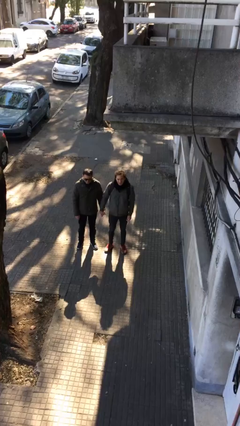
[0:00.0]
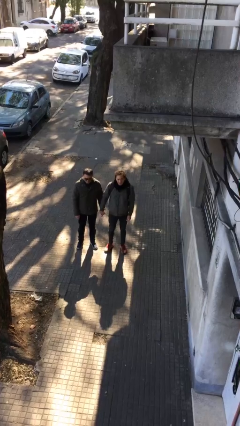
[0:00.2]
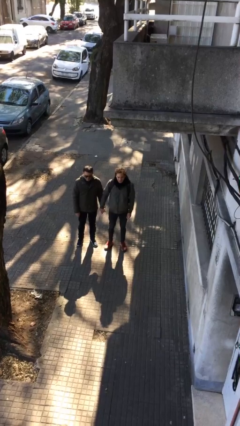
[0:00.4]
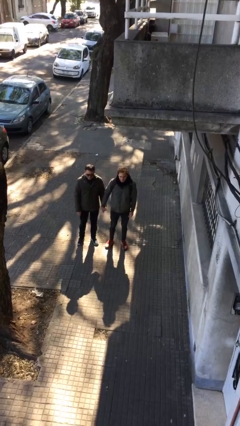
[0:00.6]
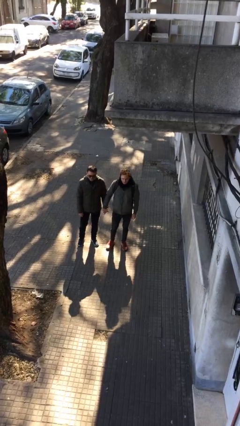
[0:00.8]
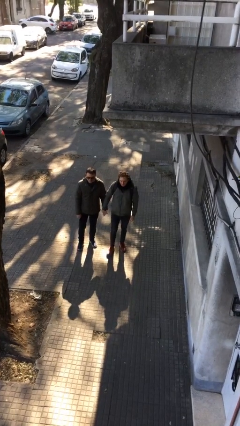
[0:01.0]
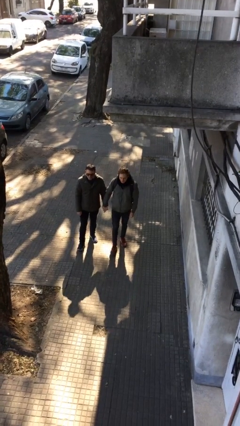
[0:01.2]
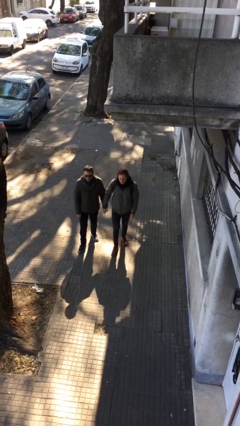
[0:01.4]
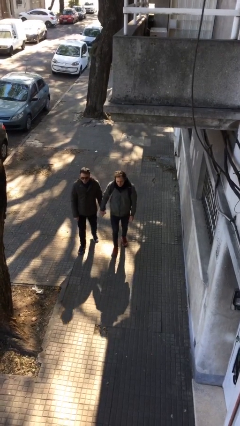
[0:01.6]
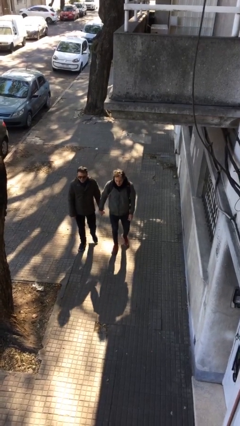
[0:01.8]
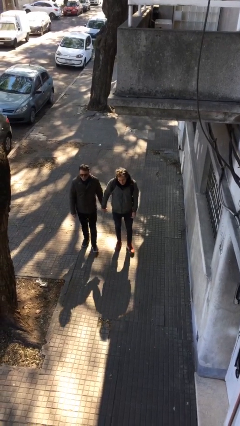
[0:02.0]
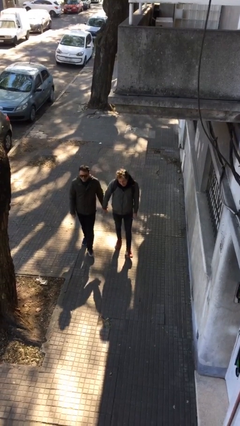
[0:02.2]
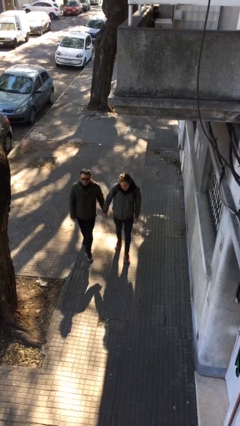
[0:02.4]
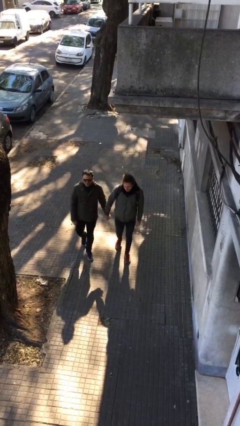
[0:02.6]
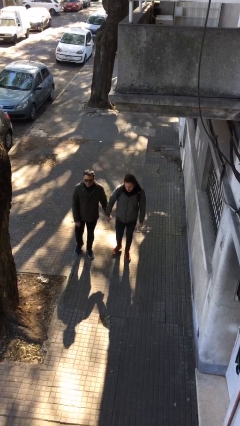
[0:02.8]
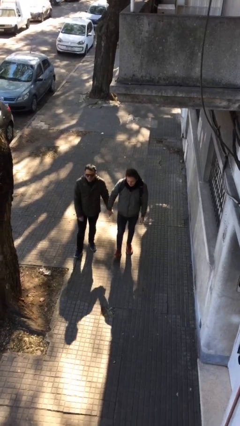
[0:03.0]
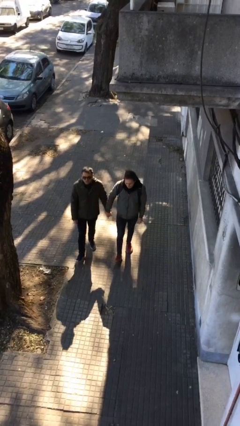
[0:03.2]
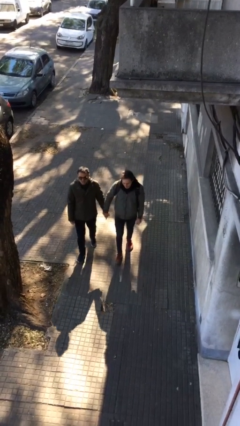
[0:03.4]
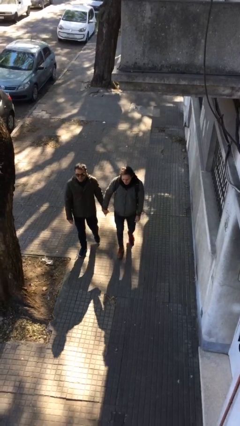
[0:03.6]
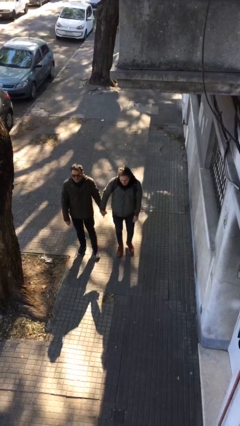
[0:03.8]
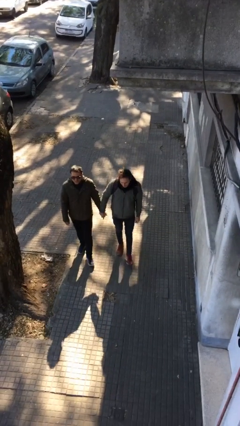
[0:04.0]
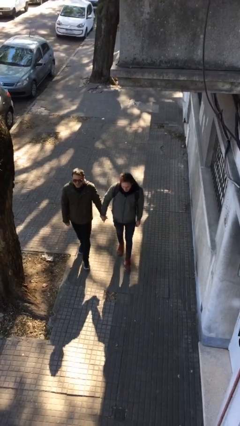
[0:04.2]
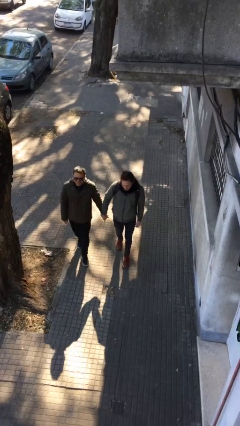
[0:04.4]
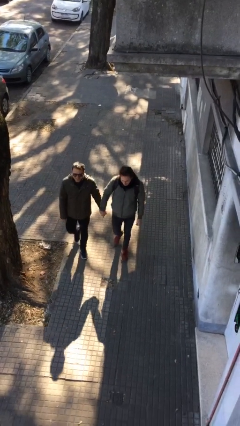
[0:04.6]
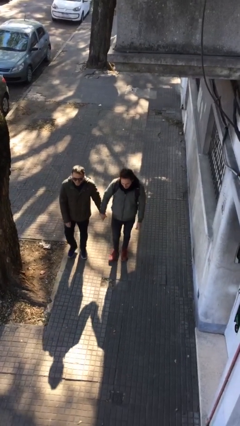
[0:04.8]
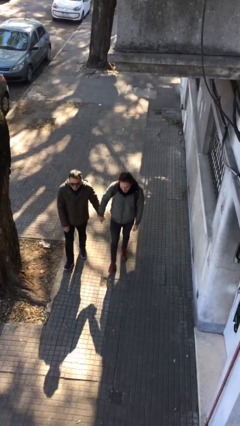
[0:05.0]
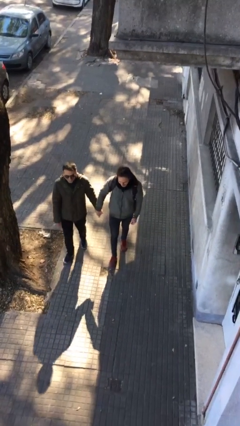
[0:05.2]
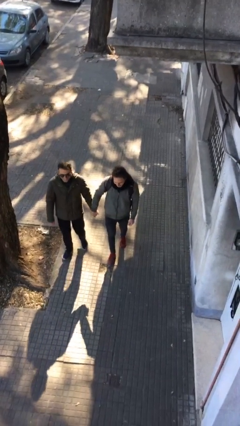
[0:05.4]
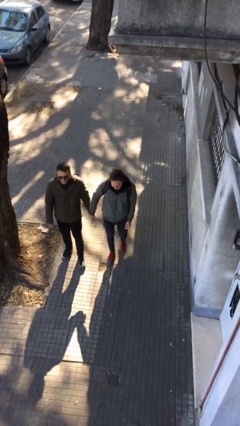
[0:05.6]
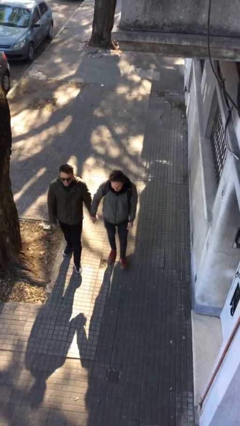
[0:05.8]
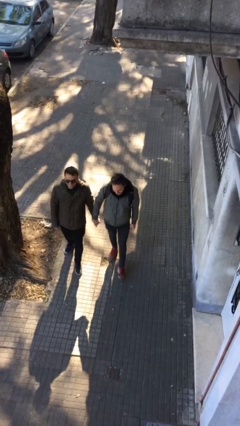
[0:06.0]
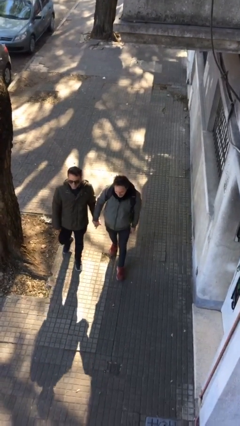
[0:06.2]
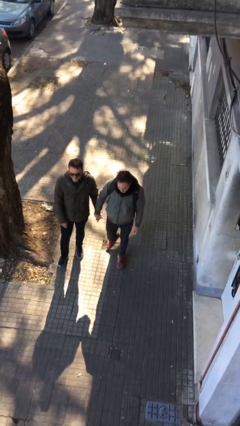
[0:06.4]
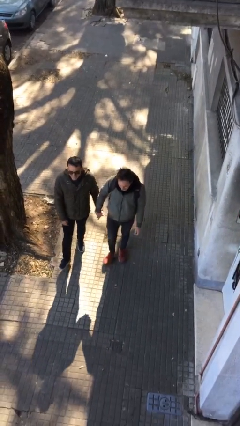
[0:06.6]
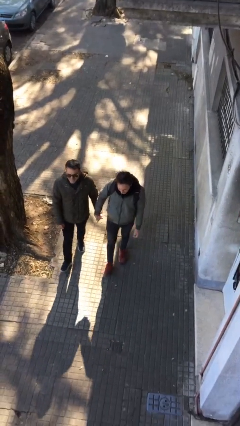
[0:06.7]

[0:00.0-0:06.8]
person holds hand

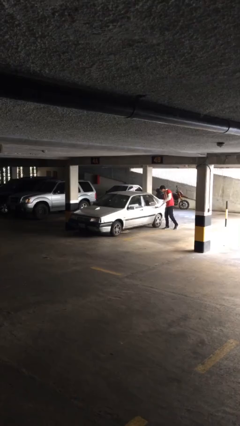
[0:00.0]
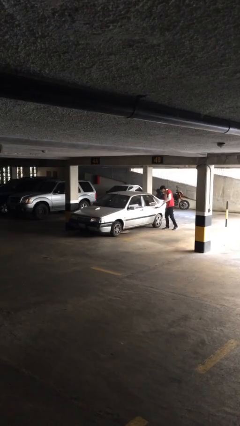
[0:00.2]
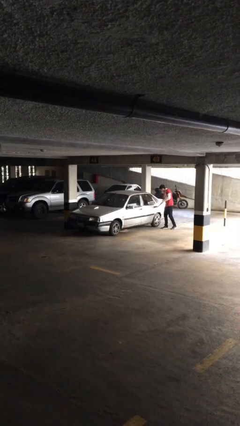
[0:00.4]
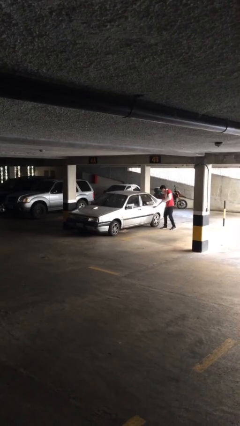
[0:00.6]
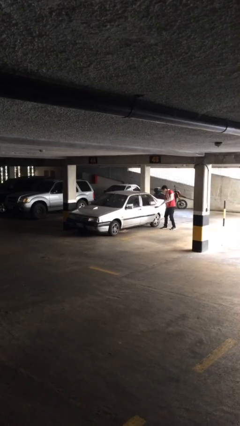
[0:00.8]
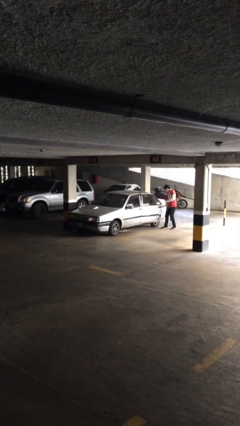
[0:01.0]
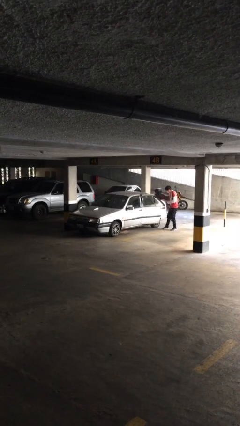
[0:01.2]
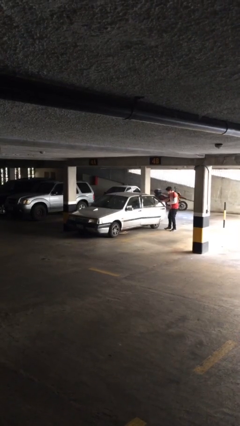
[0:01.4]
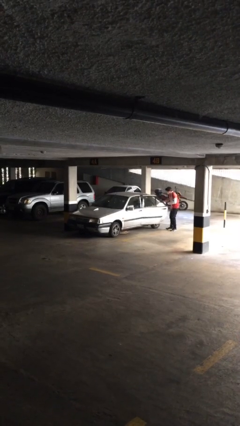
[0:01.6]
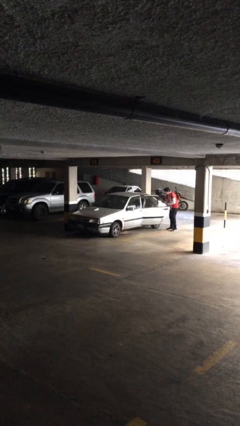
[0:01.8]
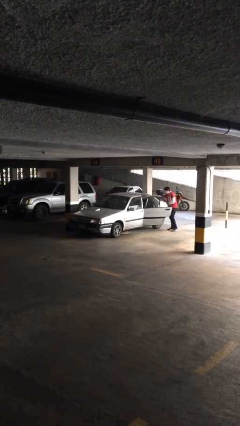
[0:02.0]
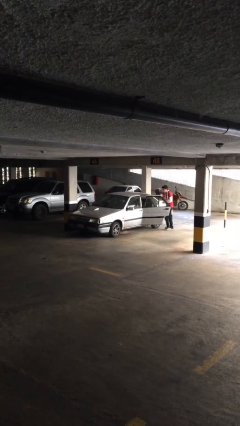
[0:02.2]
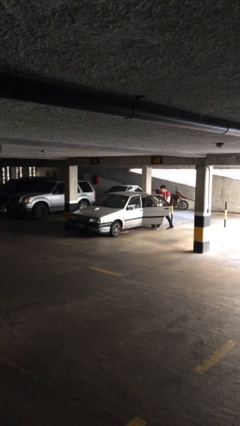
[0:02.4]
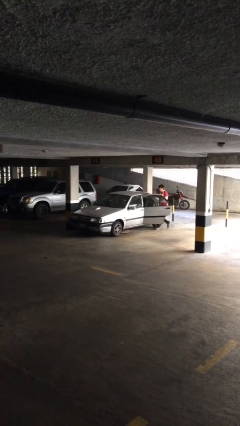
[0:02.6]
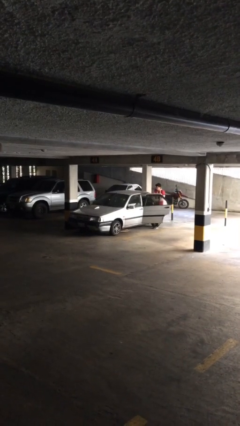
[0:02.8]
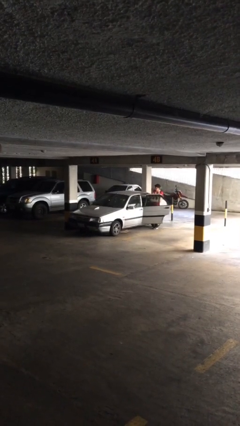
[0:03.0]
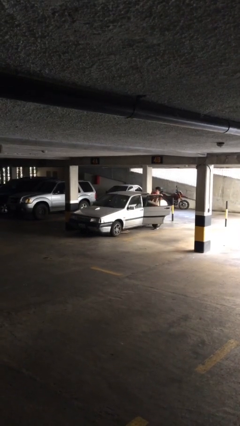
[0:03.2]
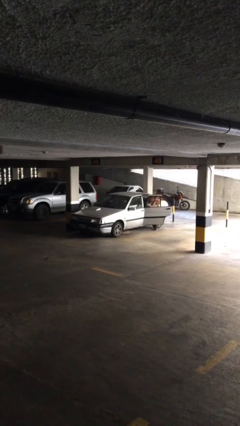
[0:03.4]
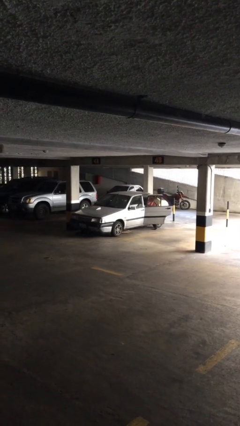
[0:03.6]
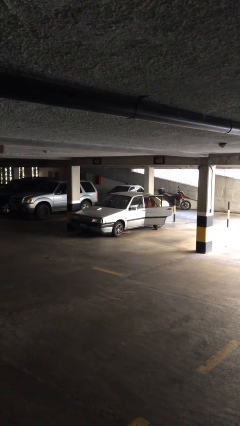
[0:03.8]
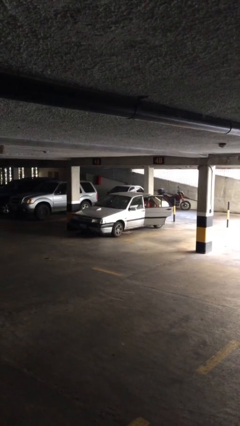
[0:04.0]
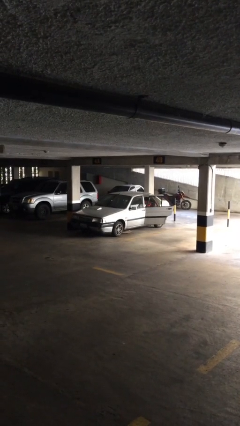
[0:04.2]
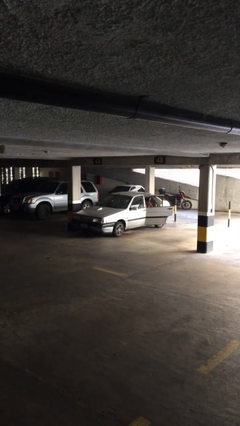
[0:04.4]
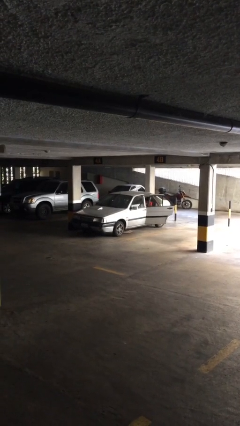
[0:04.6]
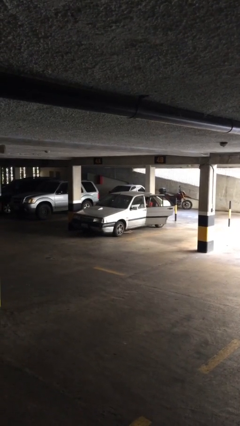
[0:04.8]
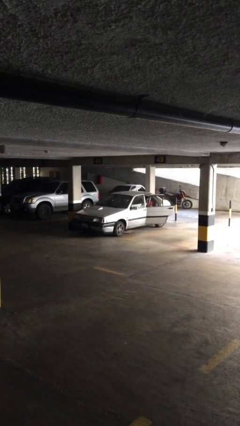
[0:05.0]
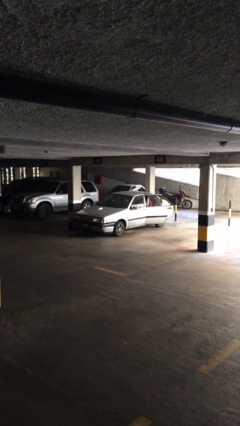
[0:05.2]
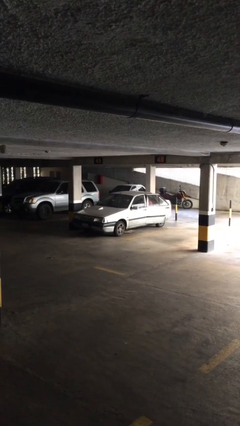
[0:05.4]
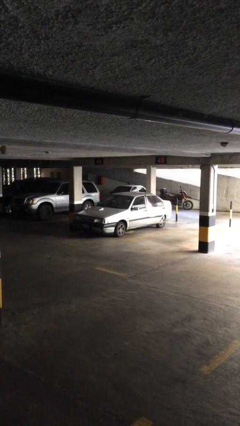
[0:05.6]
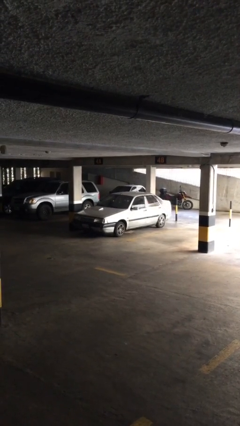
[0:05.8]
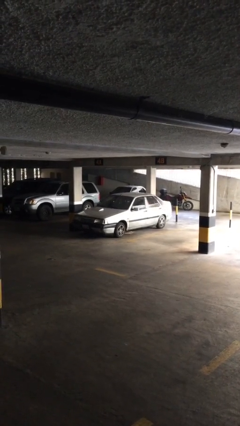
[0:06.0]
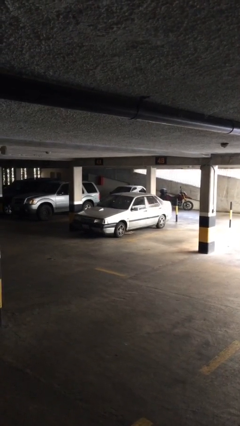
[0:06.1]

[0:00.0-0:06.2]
car picks up person

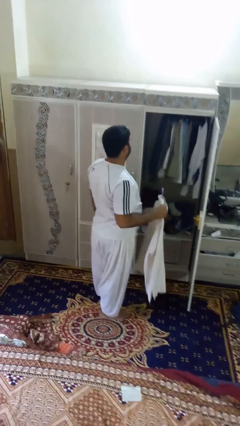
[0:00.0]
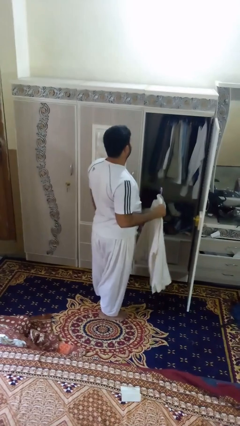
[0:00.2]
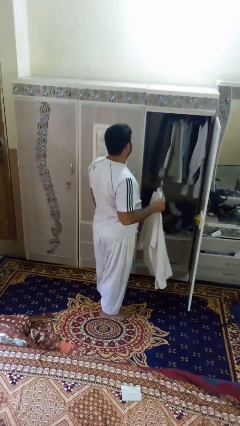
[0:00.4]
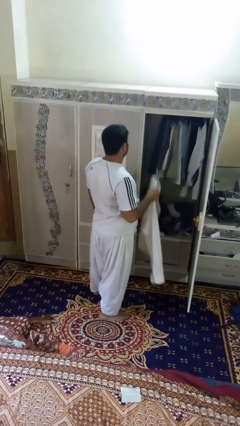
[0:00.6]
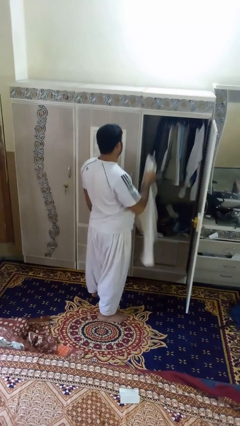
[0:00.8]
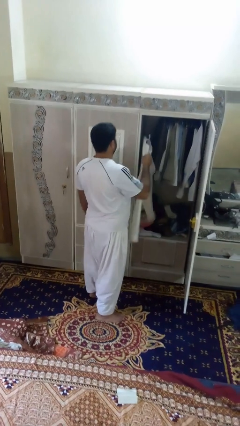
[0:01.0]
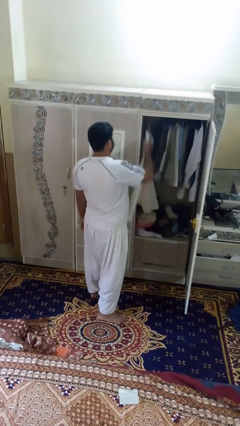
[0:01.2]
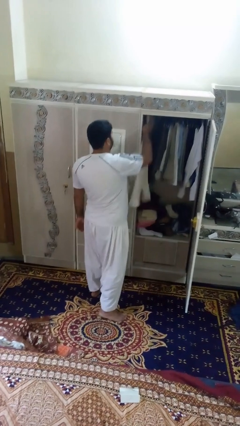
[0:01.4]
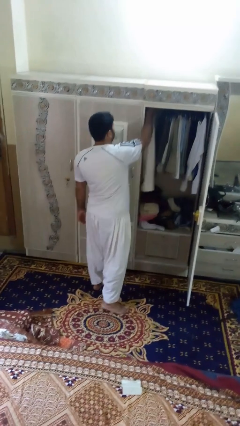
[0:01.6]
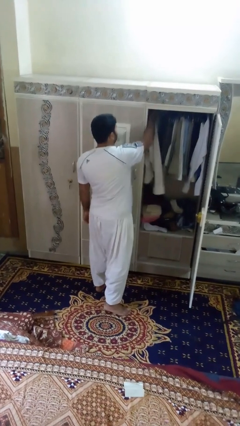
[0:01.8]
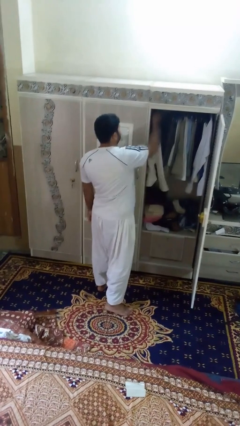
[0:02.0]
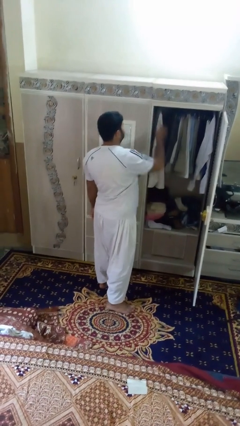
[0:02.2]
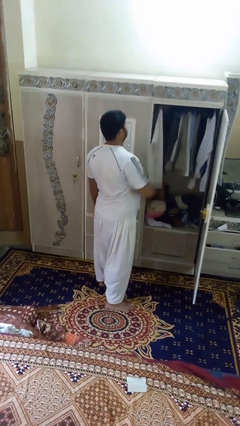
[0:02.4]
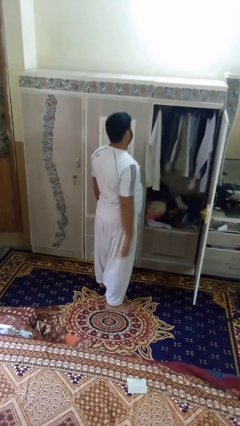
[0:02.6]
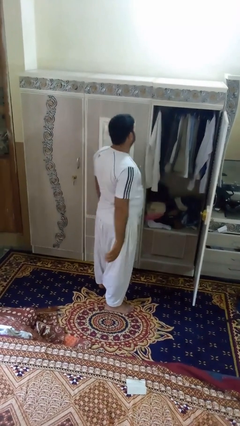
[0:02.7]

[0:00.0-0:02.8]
person puts clothes into closet

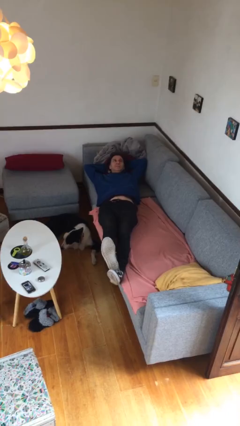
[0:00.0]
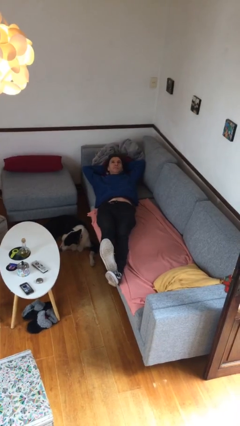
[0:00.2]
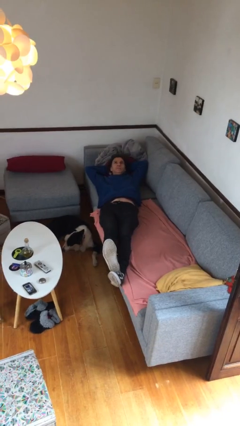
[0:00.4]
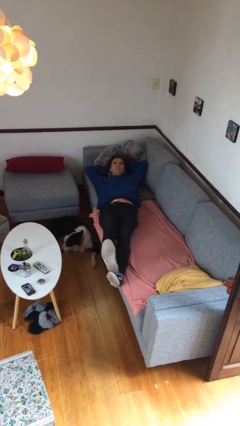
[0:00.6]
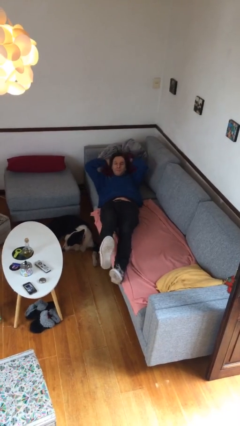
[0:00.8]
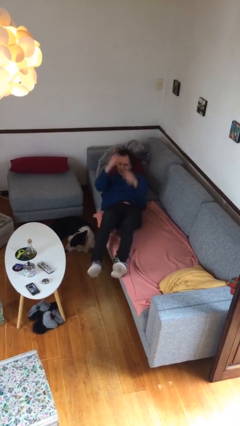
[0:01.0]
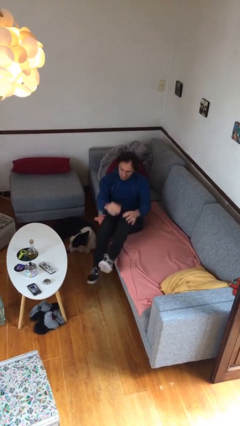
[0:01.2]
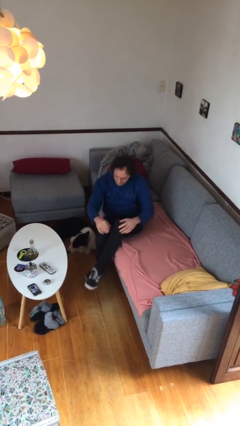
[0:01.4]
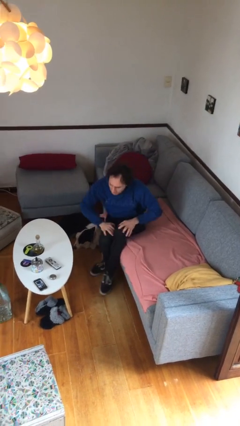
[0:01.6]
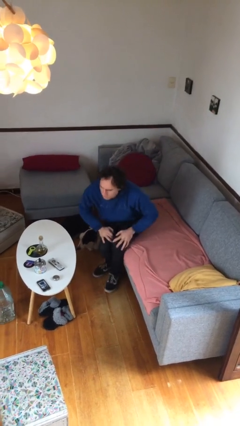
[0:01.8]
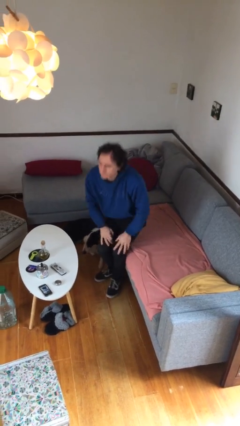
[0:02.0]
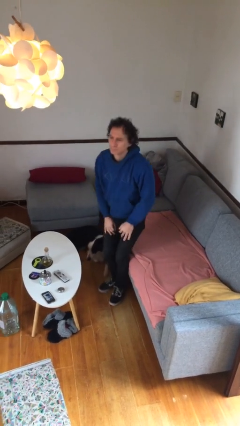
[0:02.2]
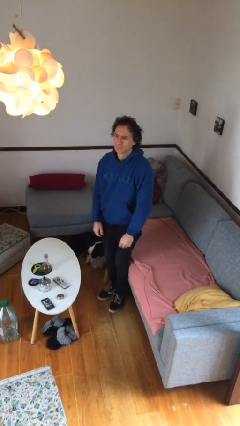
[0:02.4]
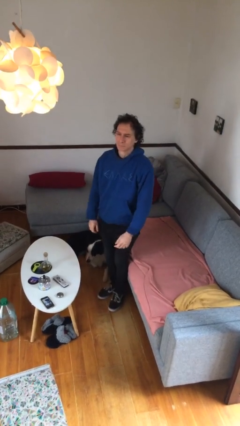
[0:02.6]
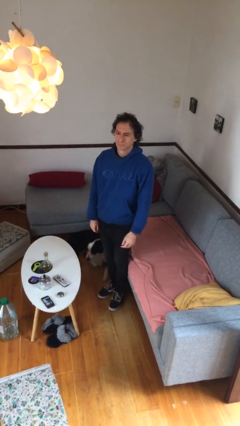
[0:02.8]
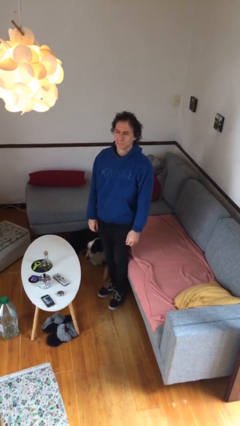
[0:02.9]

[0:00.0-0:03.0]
person stands up
